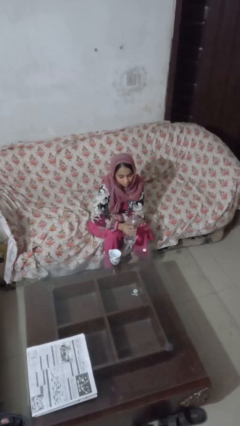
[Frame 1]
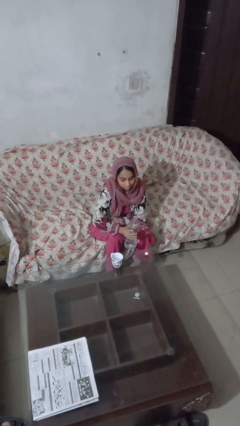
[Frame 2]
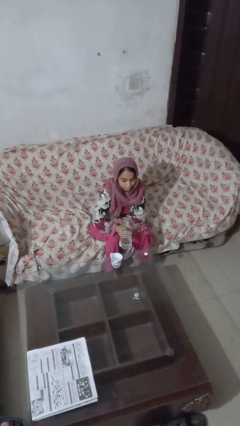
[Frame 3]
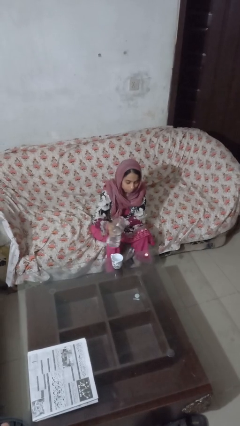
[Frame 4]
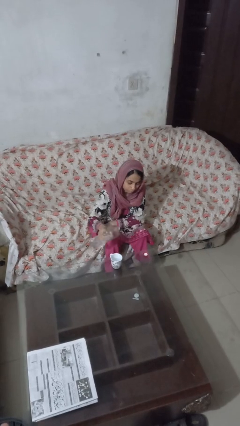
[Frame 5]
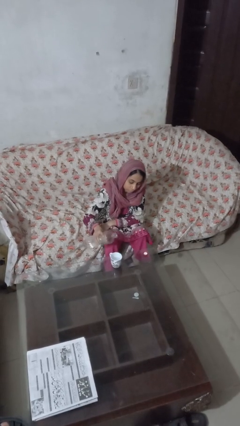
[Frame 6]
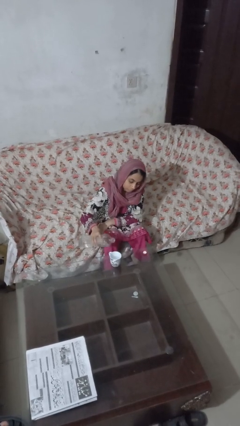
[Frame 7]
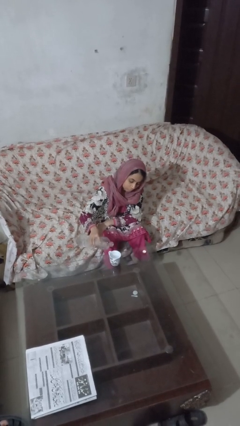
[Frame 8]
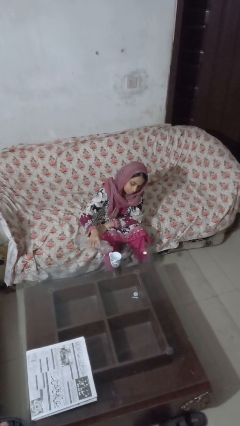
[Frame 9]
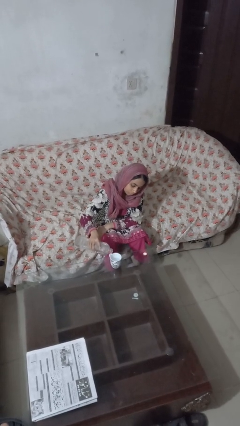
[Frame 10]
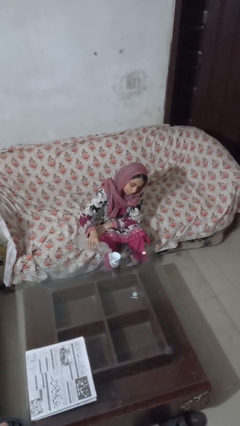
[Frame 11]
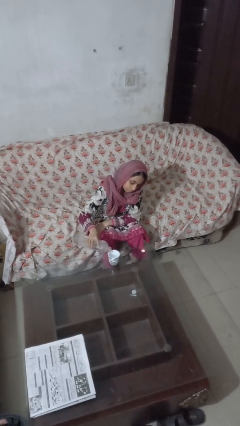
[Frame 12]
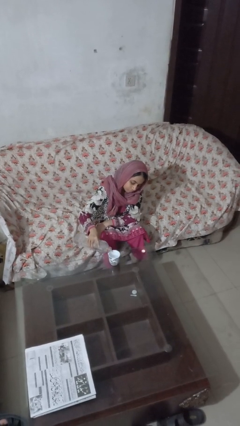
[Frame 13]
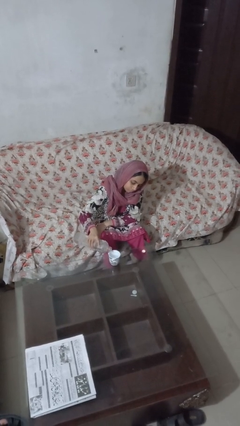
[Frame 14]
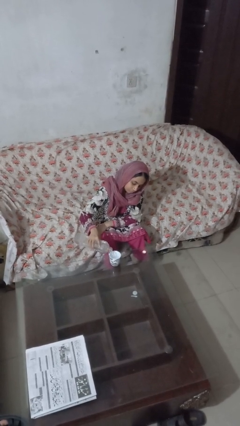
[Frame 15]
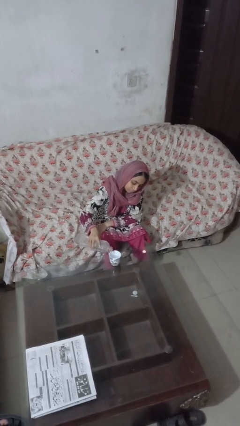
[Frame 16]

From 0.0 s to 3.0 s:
person pours liquid into cup

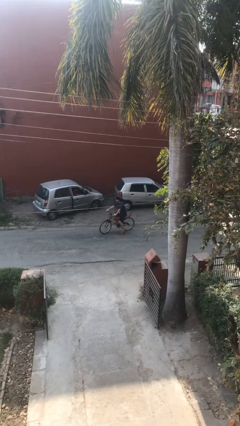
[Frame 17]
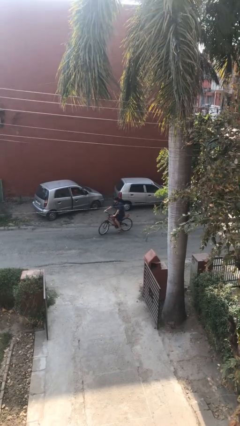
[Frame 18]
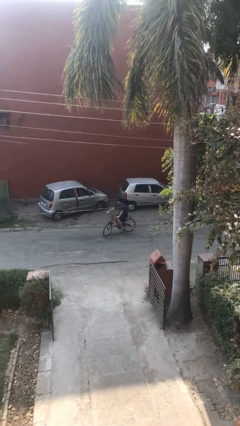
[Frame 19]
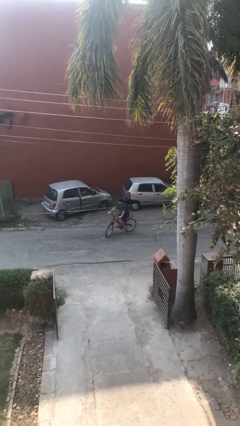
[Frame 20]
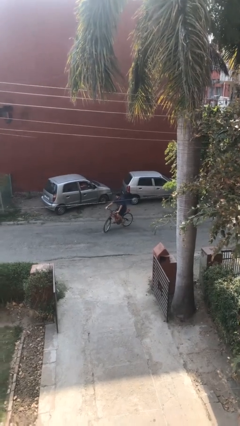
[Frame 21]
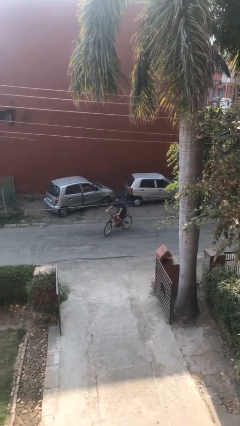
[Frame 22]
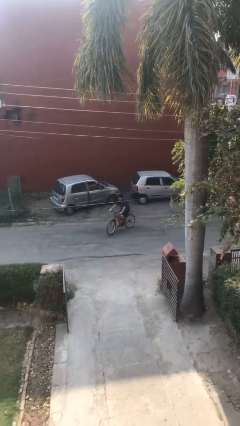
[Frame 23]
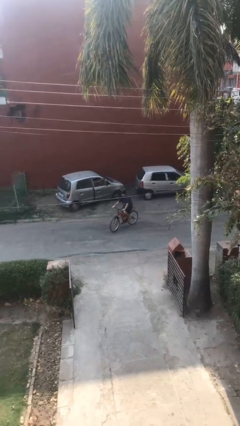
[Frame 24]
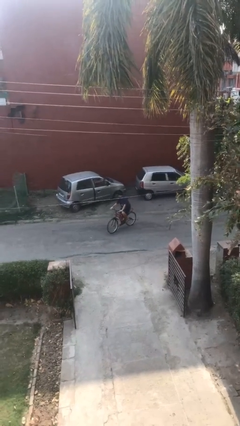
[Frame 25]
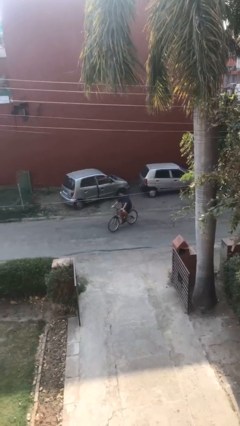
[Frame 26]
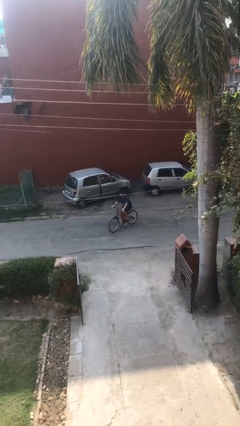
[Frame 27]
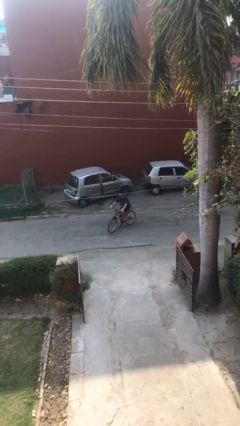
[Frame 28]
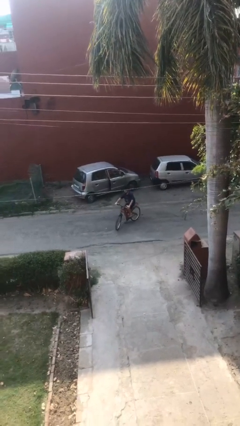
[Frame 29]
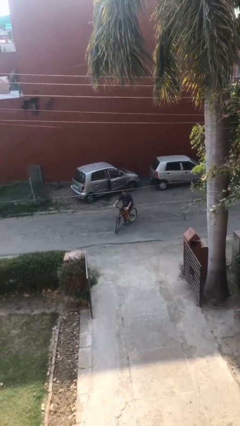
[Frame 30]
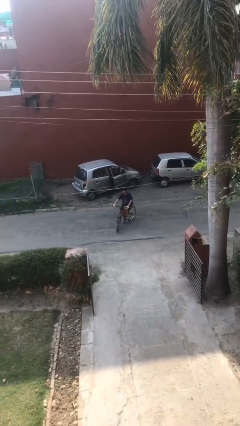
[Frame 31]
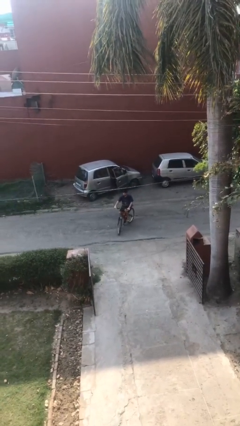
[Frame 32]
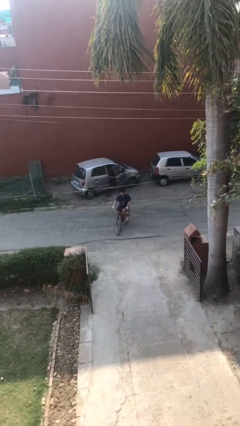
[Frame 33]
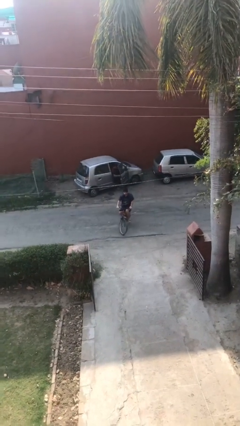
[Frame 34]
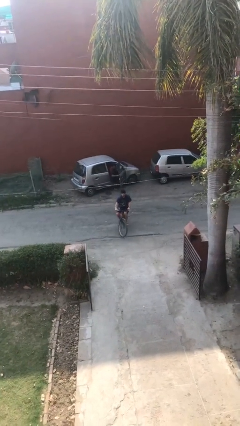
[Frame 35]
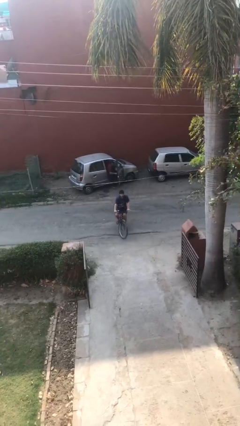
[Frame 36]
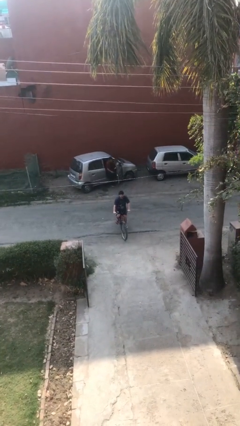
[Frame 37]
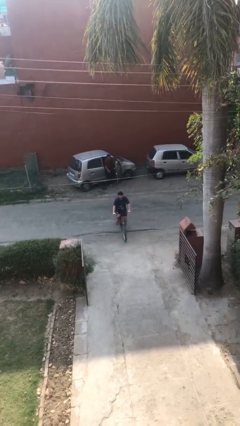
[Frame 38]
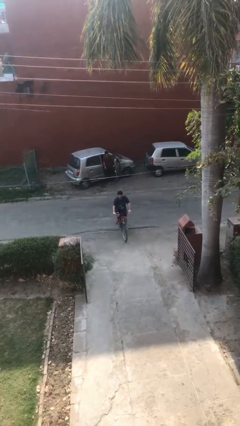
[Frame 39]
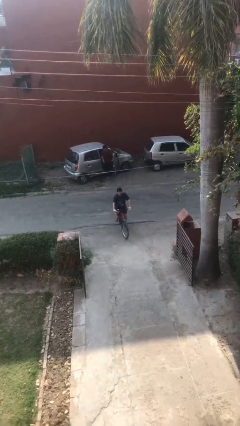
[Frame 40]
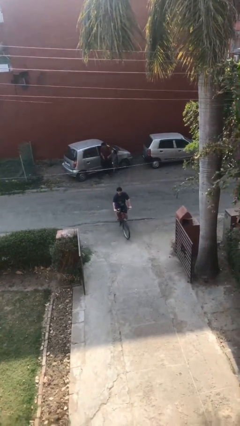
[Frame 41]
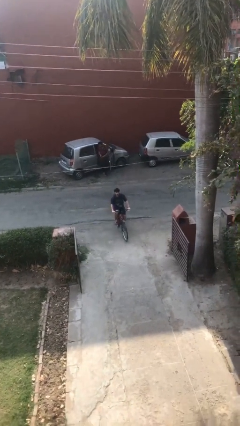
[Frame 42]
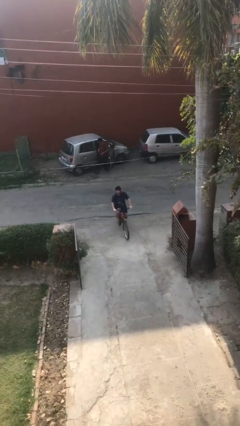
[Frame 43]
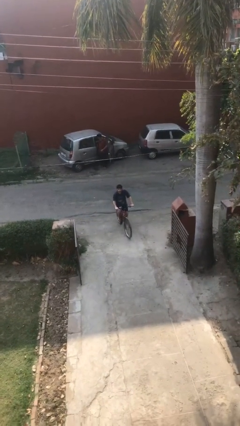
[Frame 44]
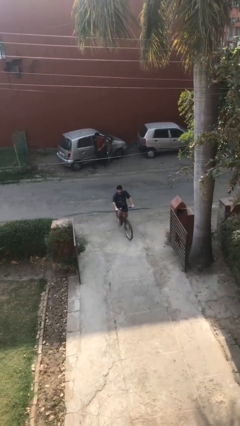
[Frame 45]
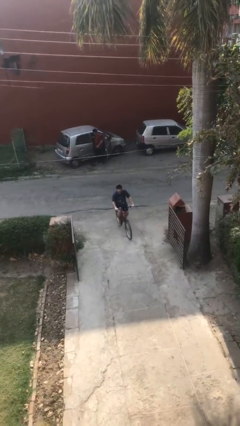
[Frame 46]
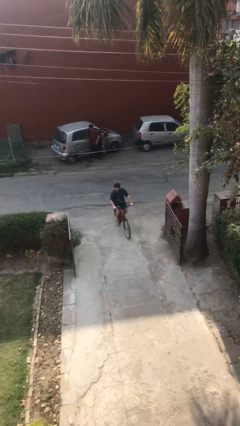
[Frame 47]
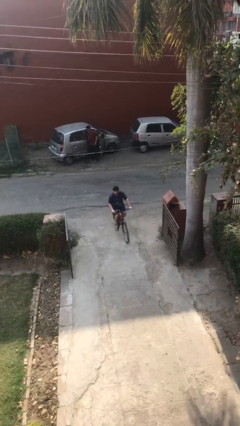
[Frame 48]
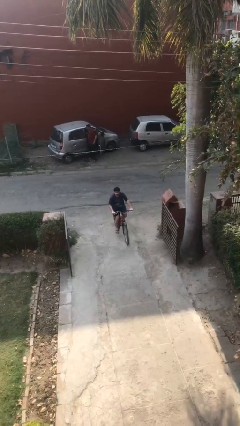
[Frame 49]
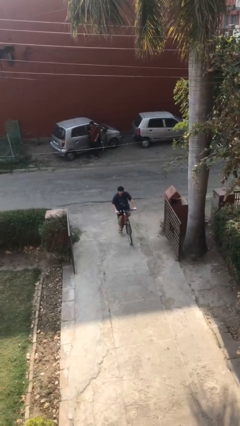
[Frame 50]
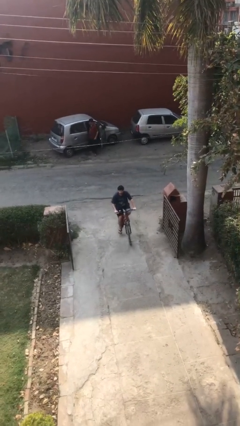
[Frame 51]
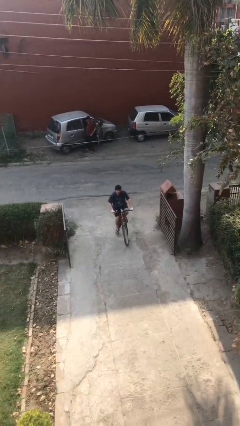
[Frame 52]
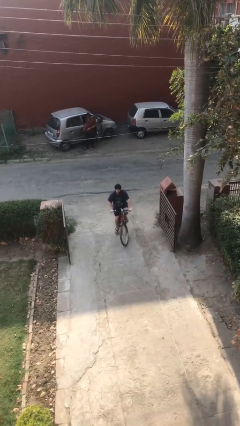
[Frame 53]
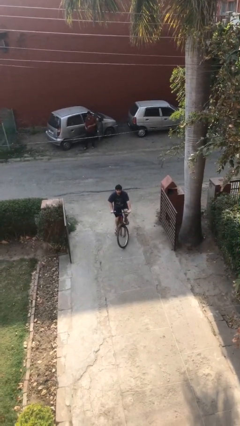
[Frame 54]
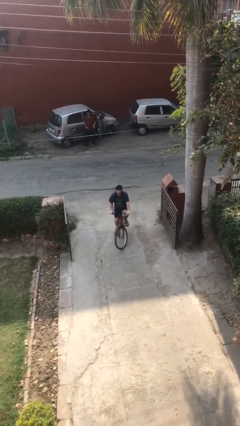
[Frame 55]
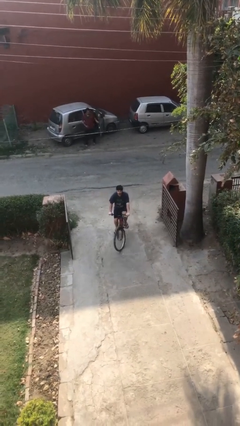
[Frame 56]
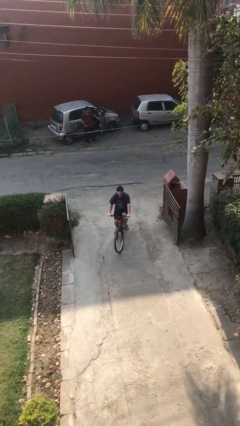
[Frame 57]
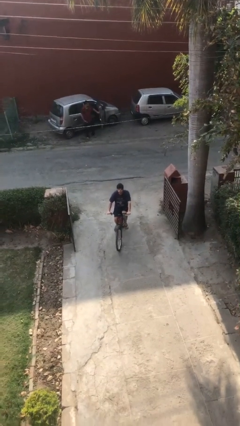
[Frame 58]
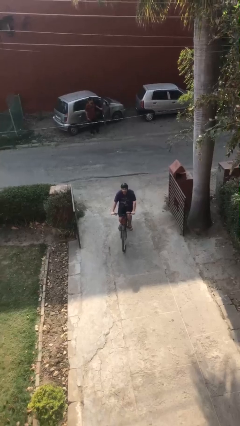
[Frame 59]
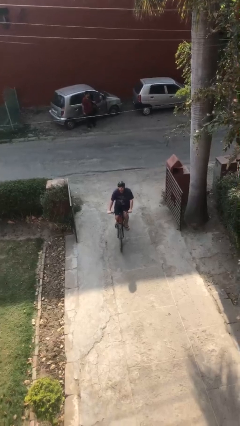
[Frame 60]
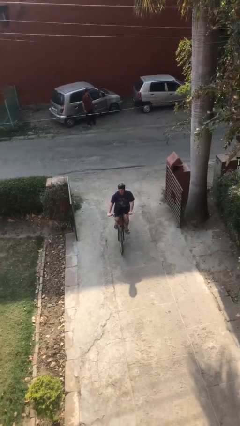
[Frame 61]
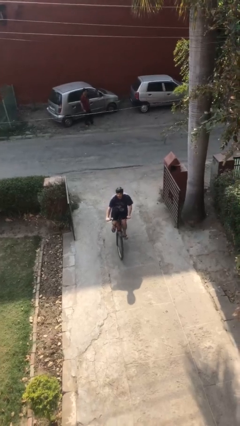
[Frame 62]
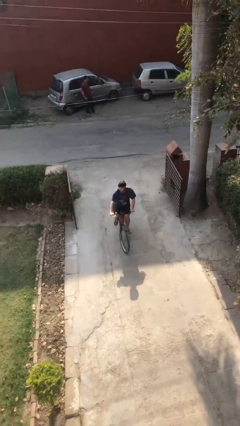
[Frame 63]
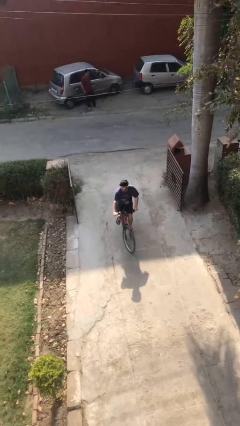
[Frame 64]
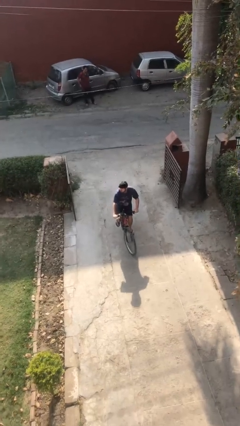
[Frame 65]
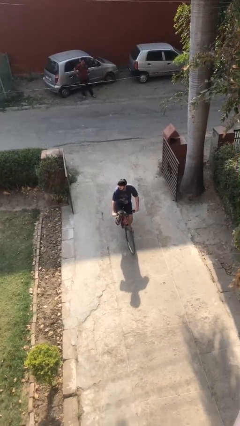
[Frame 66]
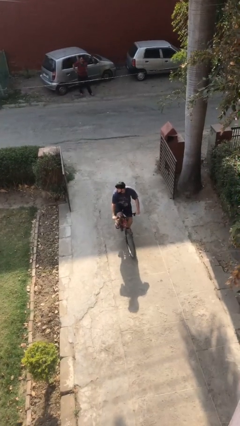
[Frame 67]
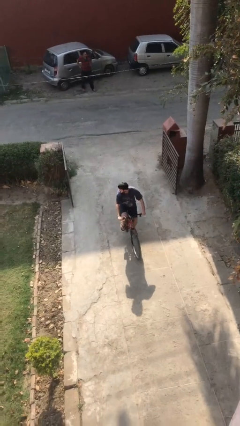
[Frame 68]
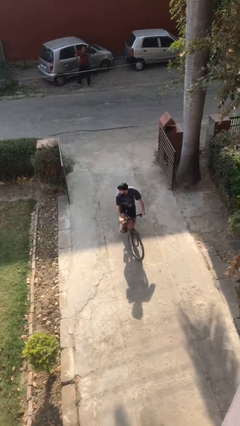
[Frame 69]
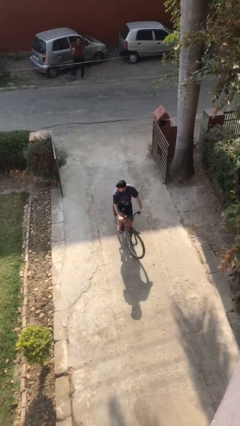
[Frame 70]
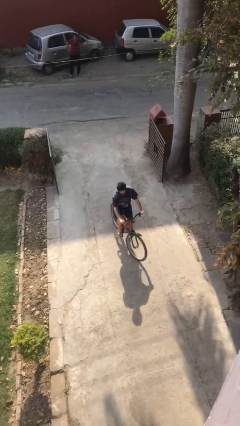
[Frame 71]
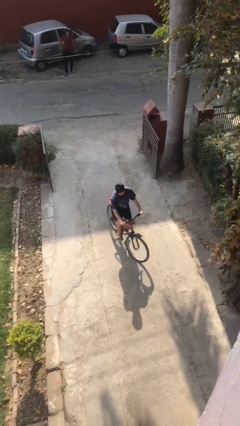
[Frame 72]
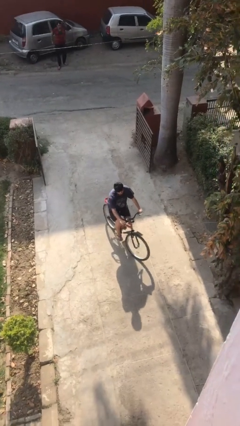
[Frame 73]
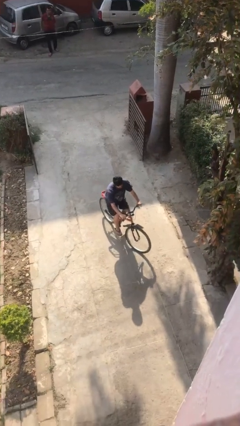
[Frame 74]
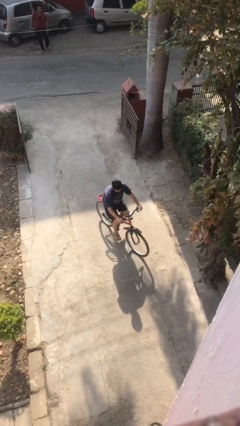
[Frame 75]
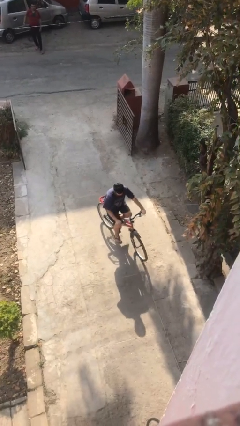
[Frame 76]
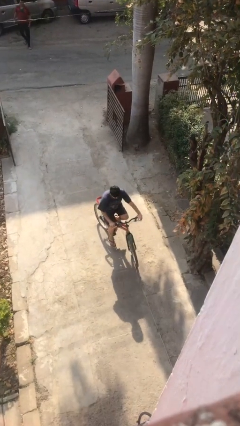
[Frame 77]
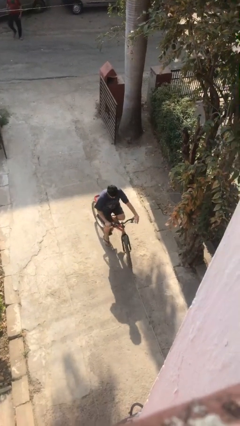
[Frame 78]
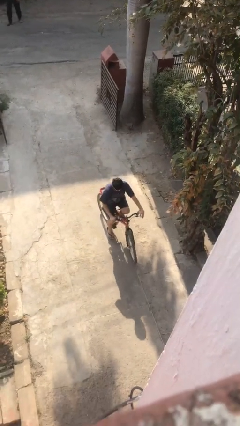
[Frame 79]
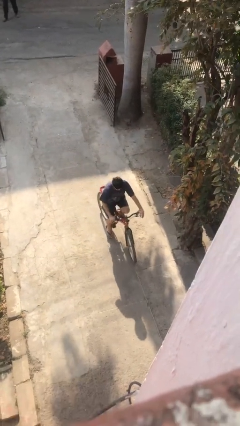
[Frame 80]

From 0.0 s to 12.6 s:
person rides bicycle

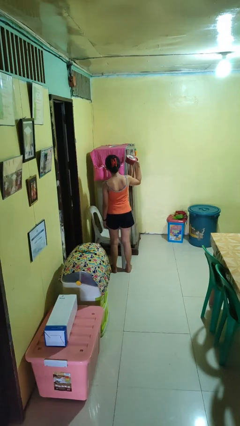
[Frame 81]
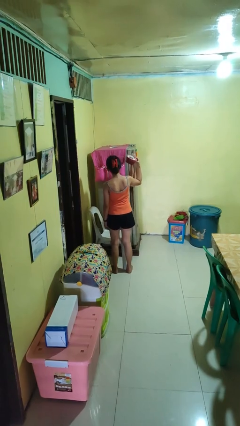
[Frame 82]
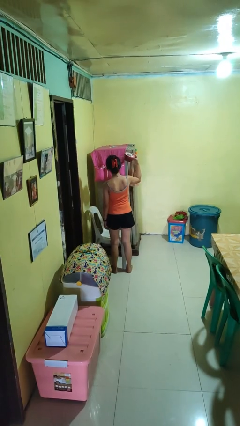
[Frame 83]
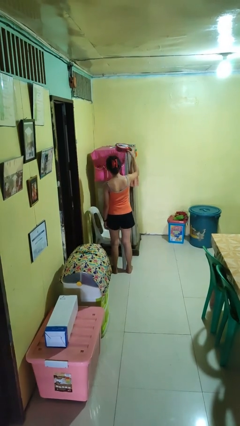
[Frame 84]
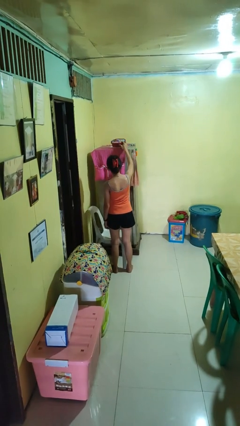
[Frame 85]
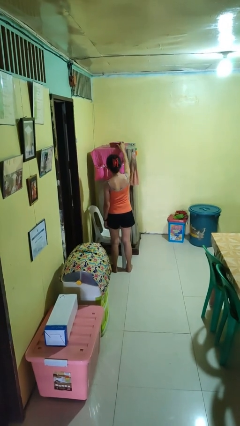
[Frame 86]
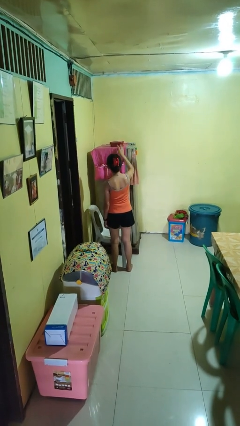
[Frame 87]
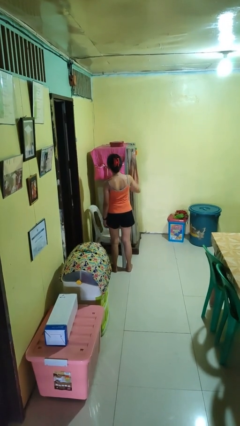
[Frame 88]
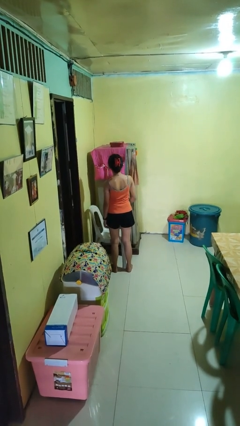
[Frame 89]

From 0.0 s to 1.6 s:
person puts down object on shelf

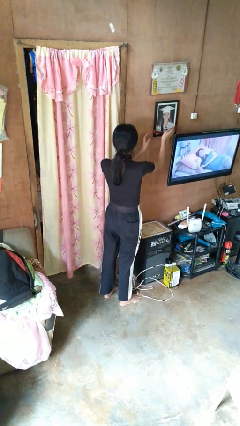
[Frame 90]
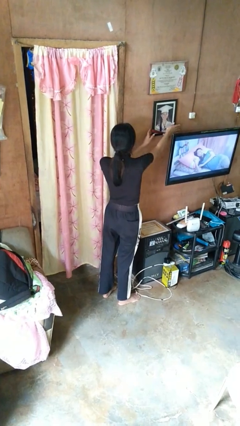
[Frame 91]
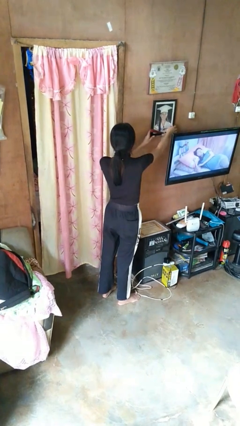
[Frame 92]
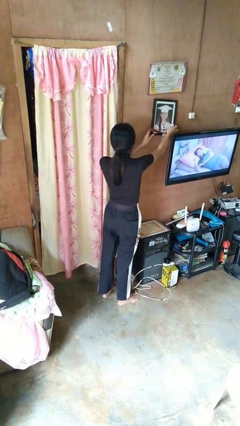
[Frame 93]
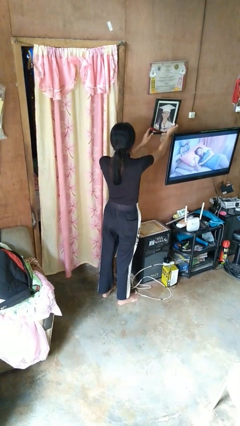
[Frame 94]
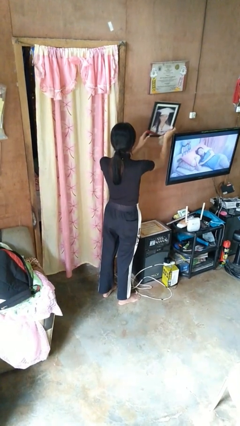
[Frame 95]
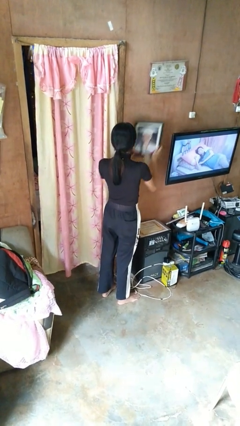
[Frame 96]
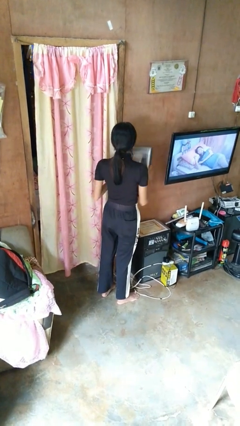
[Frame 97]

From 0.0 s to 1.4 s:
person takes down picture frame
